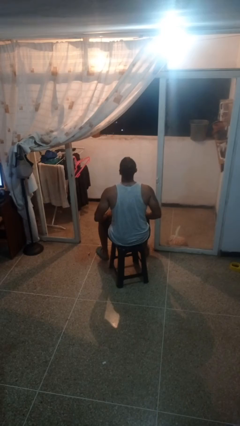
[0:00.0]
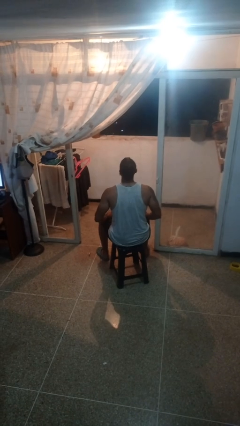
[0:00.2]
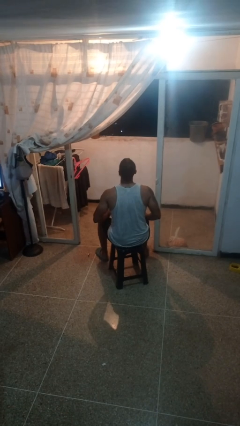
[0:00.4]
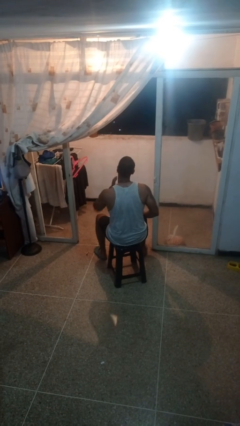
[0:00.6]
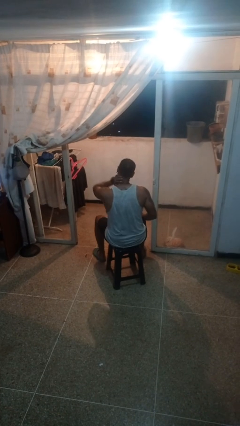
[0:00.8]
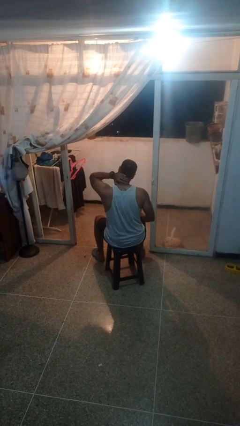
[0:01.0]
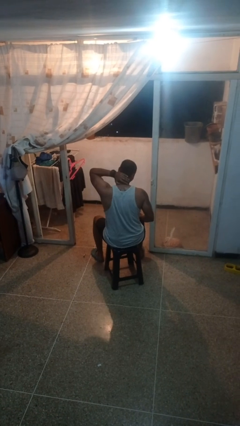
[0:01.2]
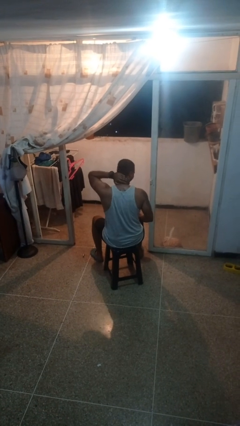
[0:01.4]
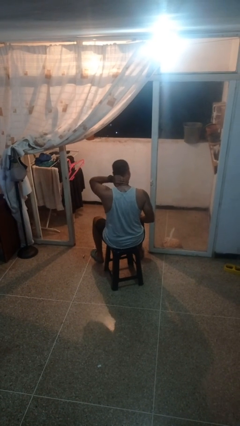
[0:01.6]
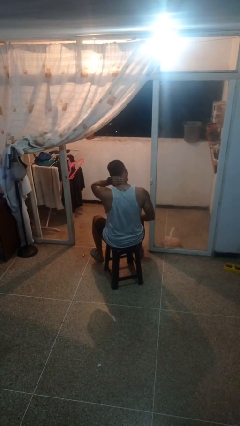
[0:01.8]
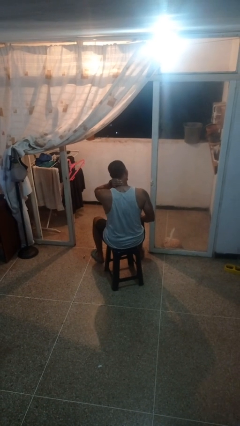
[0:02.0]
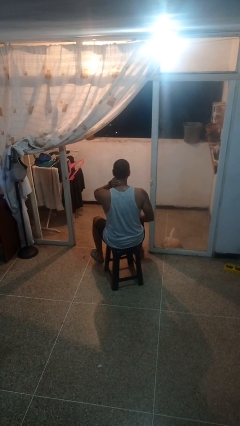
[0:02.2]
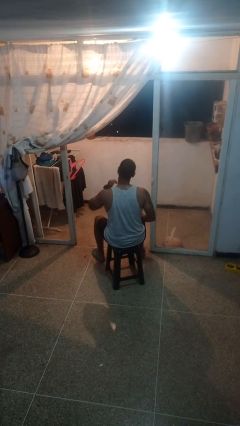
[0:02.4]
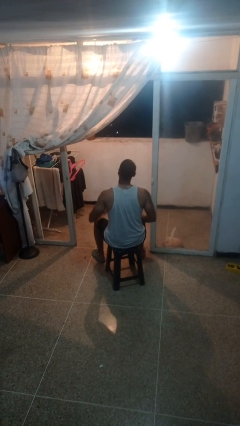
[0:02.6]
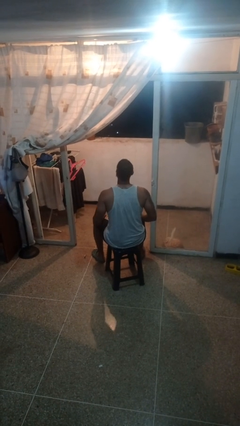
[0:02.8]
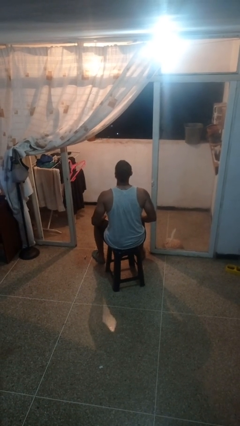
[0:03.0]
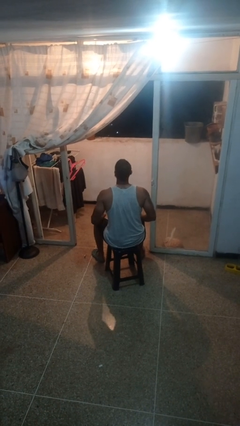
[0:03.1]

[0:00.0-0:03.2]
person rubs neck

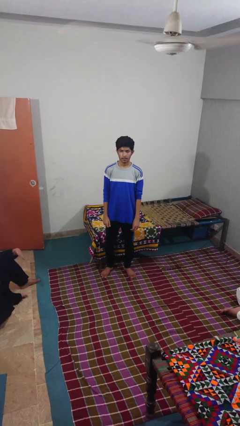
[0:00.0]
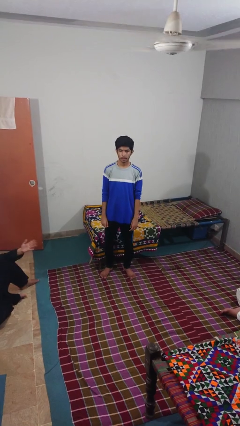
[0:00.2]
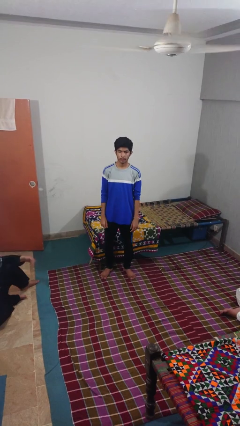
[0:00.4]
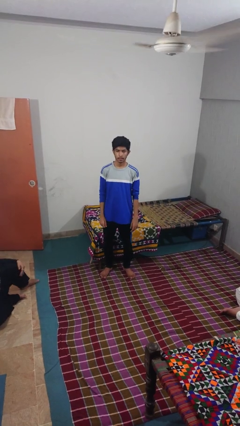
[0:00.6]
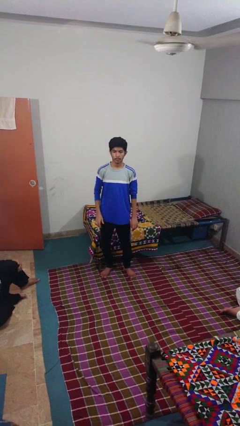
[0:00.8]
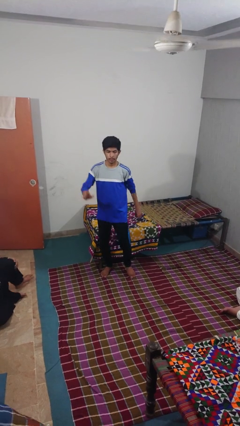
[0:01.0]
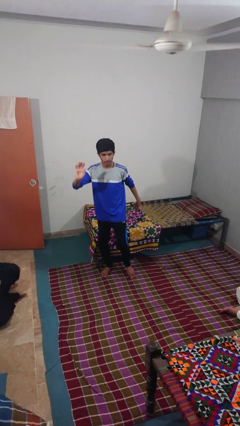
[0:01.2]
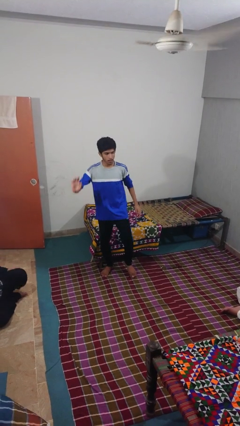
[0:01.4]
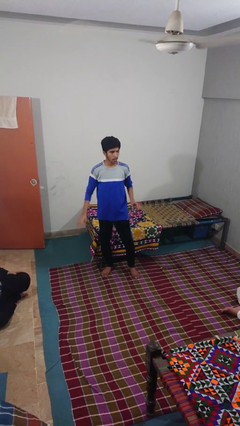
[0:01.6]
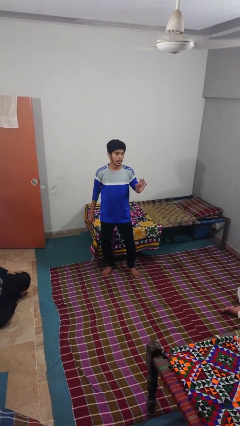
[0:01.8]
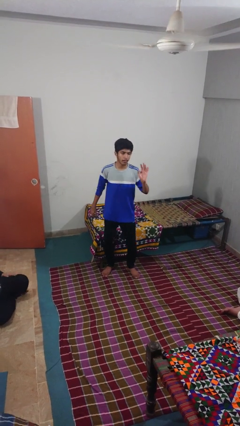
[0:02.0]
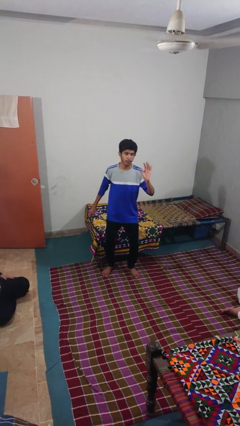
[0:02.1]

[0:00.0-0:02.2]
person dances in place

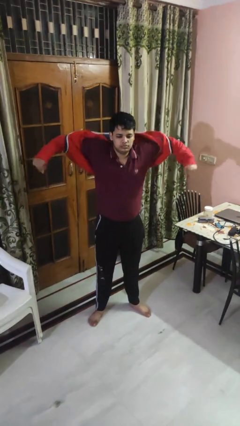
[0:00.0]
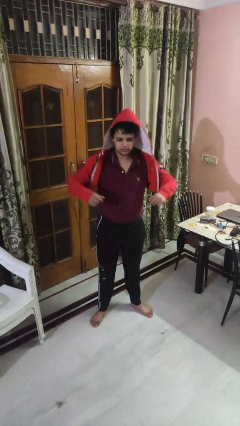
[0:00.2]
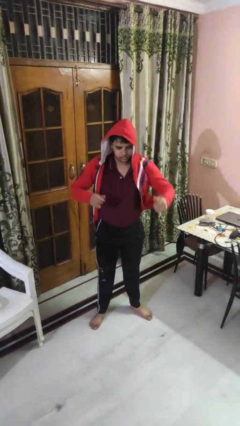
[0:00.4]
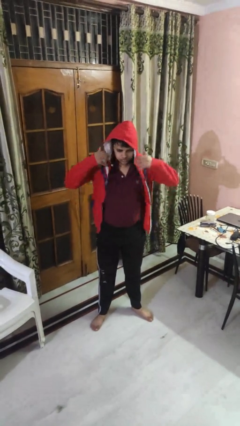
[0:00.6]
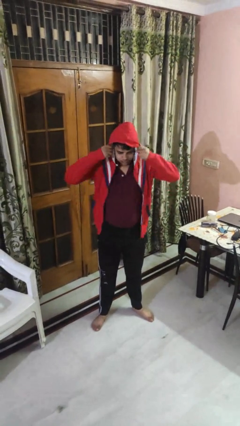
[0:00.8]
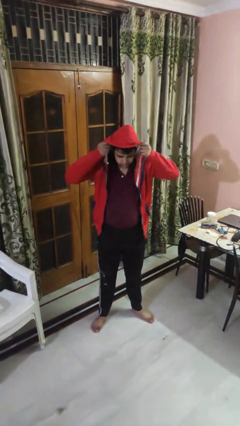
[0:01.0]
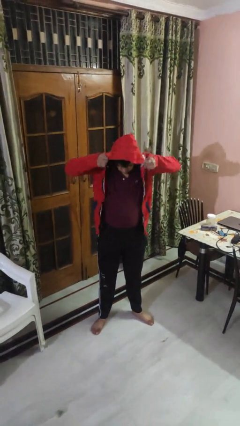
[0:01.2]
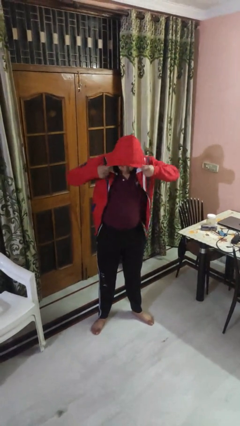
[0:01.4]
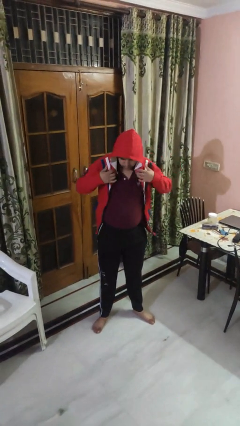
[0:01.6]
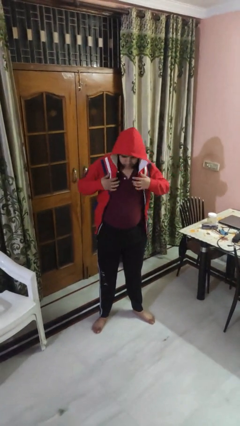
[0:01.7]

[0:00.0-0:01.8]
person puts on hoodie

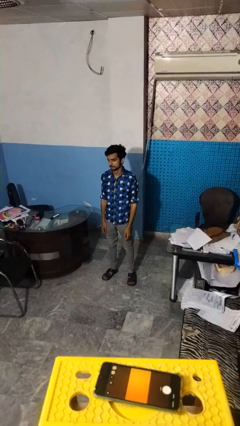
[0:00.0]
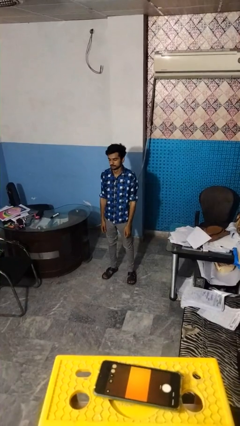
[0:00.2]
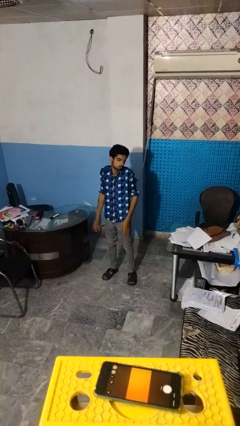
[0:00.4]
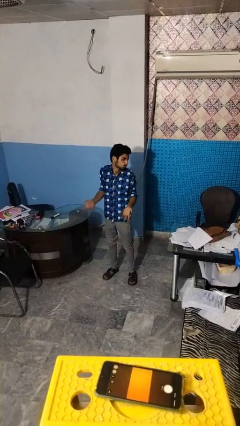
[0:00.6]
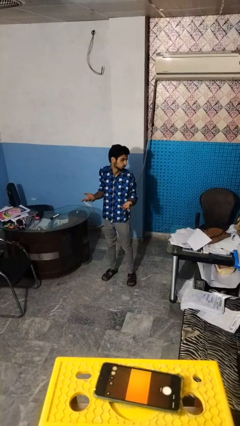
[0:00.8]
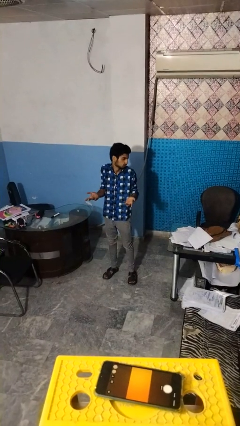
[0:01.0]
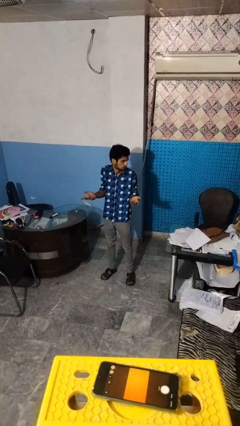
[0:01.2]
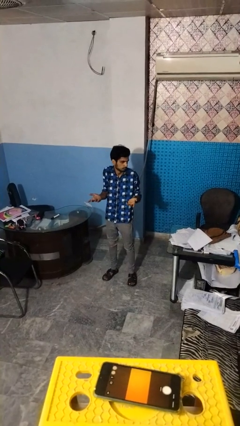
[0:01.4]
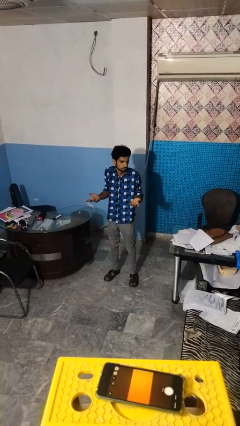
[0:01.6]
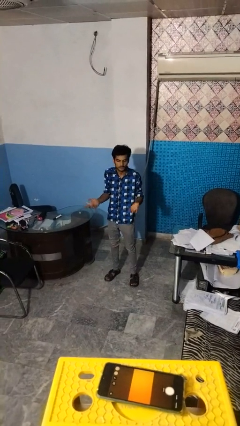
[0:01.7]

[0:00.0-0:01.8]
person shrugs

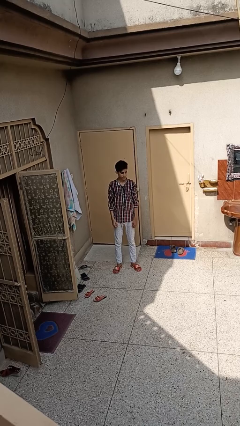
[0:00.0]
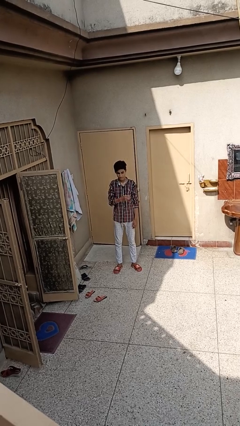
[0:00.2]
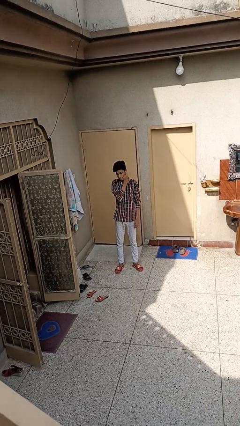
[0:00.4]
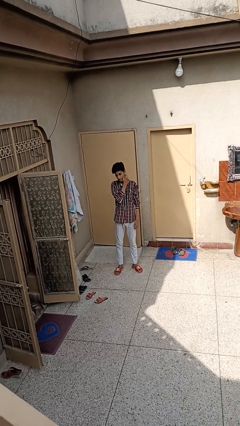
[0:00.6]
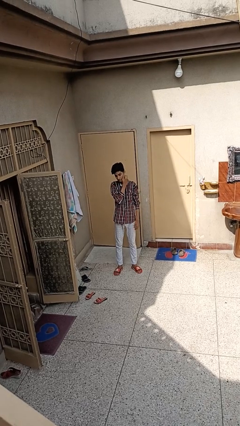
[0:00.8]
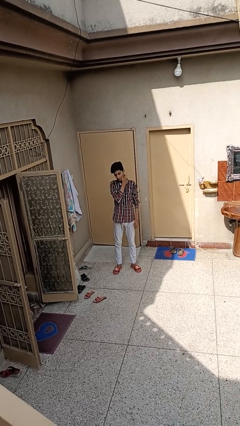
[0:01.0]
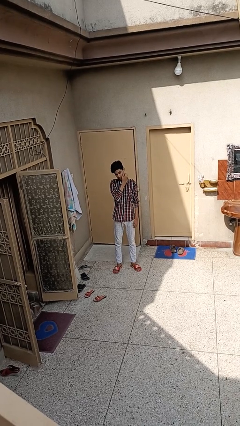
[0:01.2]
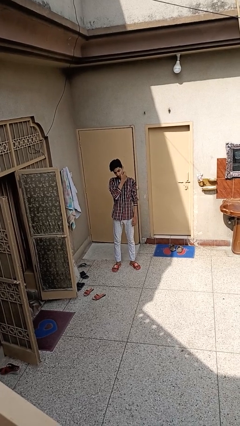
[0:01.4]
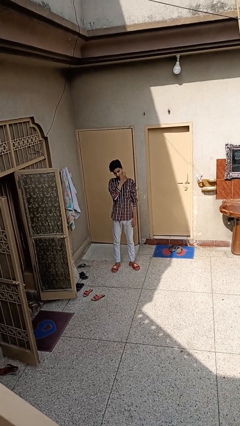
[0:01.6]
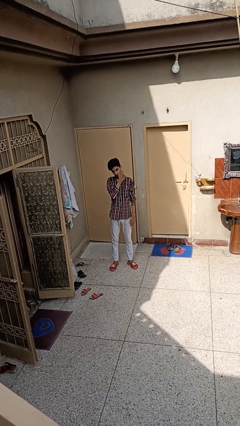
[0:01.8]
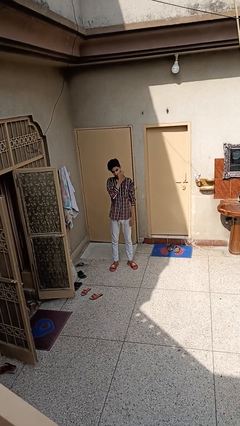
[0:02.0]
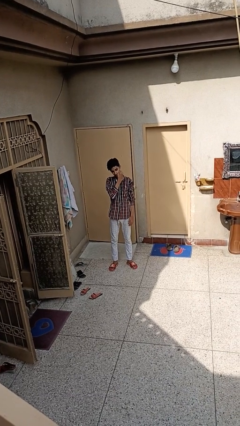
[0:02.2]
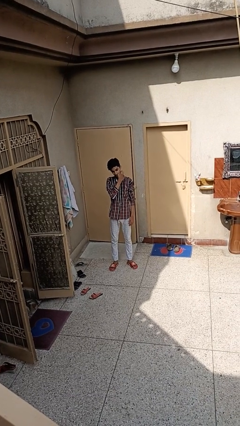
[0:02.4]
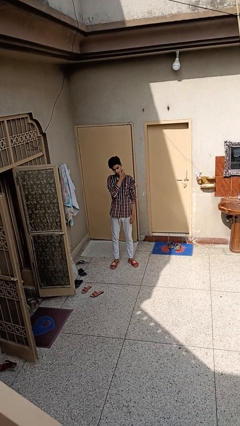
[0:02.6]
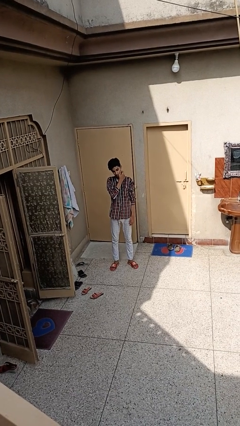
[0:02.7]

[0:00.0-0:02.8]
person scratches face

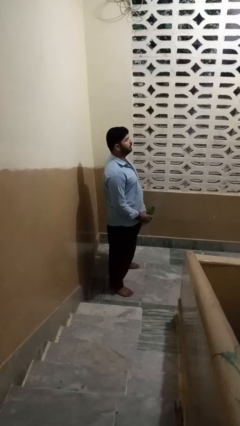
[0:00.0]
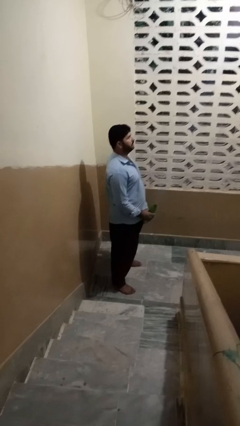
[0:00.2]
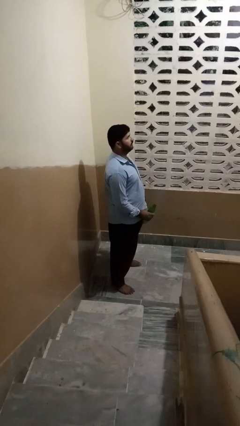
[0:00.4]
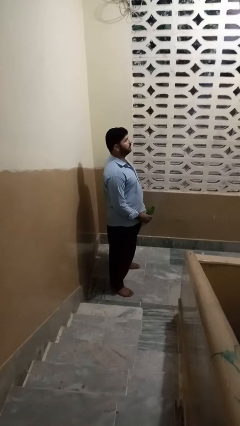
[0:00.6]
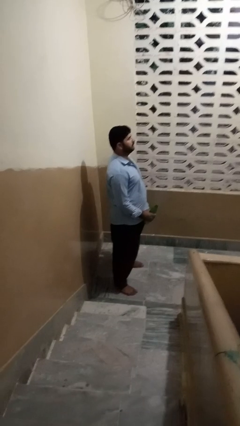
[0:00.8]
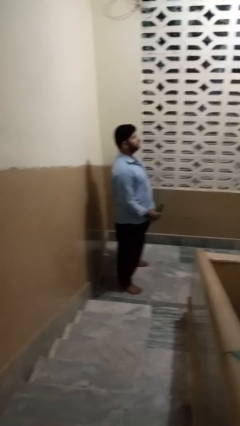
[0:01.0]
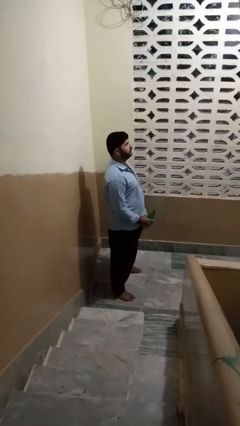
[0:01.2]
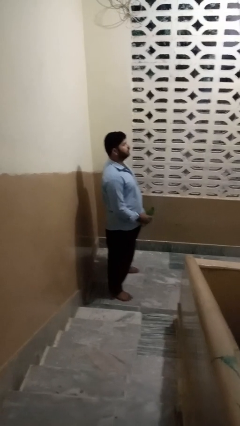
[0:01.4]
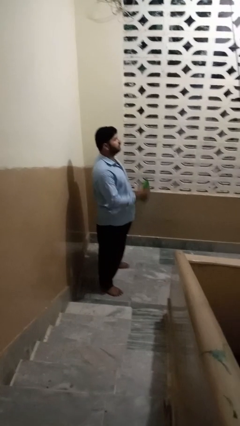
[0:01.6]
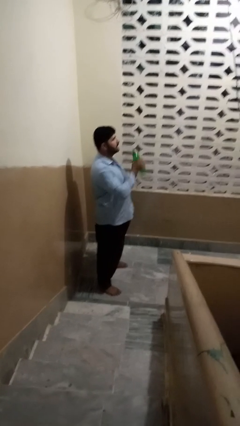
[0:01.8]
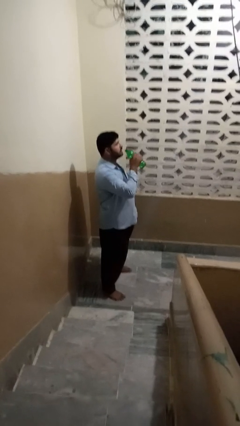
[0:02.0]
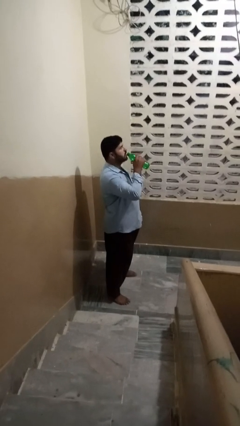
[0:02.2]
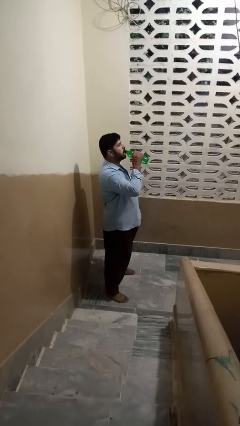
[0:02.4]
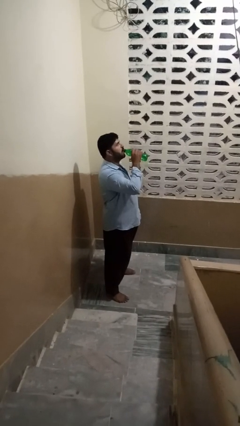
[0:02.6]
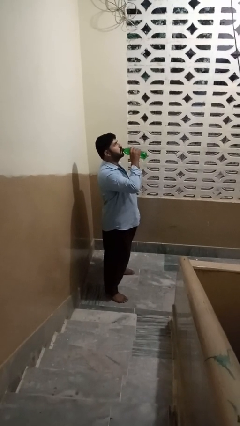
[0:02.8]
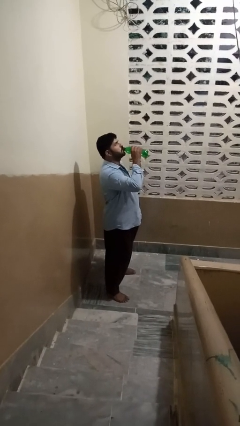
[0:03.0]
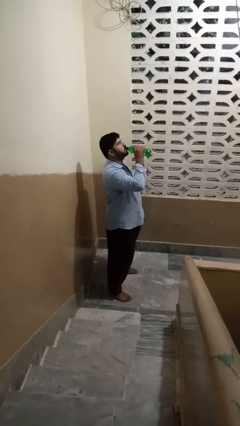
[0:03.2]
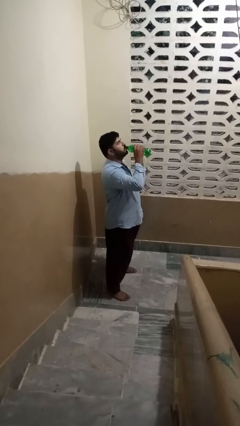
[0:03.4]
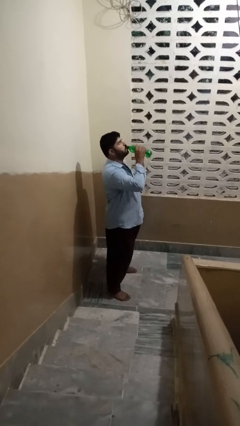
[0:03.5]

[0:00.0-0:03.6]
person drinks from bottle

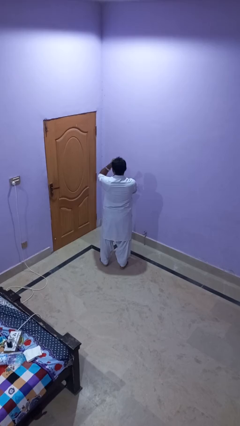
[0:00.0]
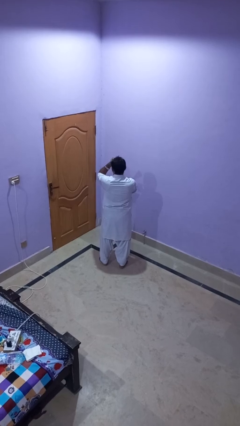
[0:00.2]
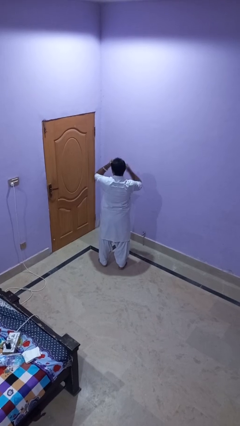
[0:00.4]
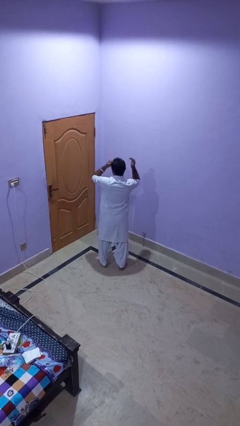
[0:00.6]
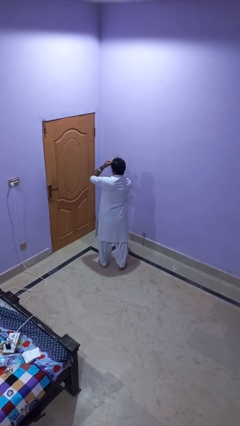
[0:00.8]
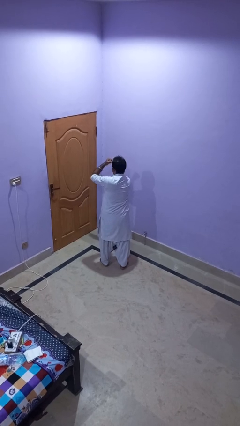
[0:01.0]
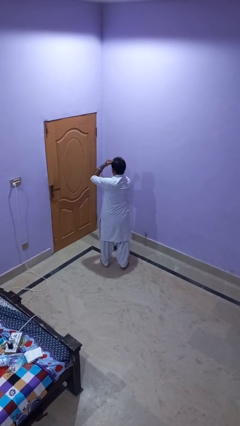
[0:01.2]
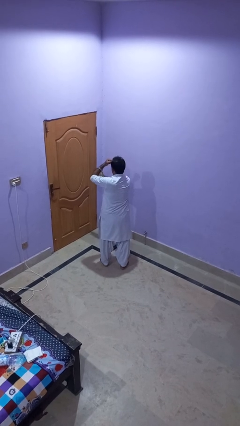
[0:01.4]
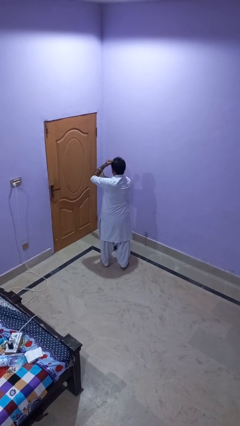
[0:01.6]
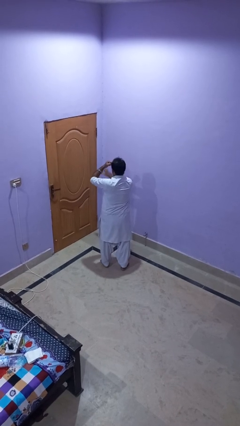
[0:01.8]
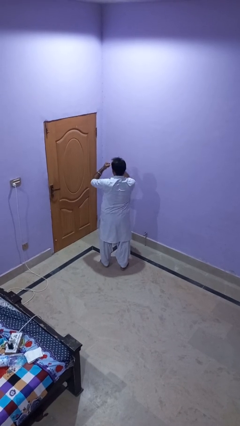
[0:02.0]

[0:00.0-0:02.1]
person karate chop
